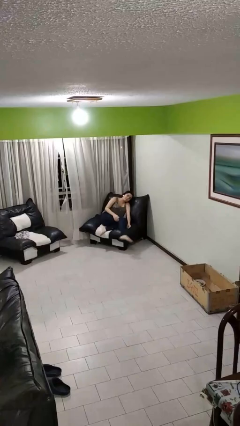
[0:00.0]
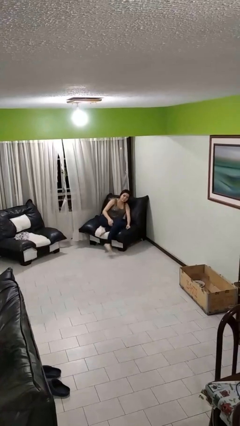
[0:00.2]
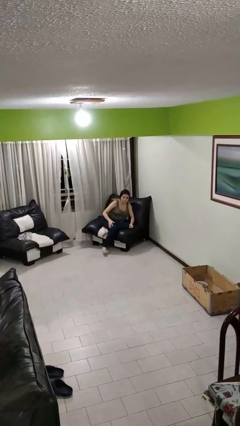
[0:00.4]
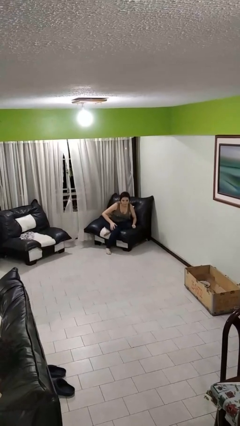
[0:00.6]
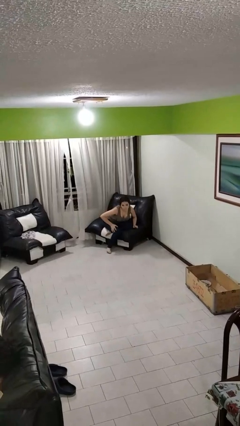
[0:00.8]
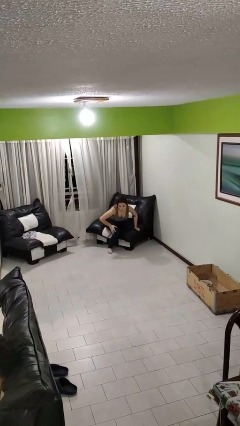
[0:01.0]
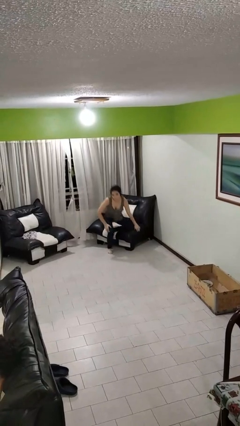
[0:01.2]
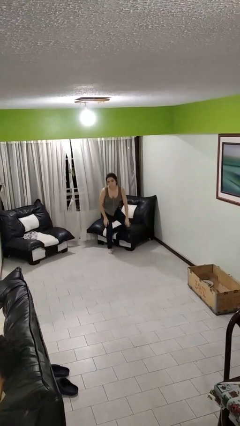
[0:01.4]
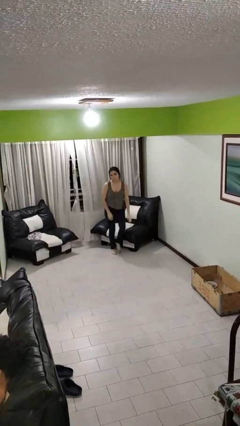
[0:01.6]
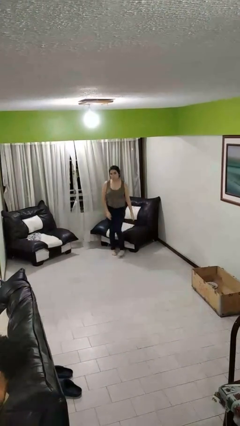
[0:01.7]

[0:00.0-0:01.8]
person stands up

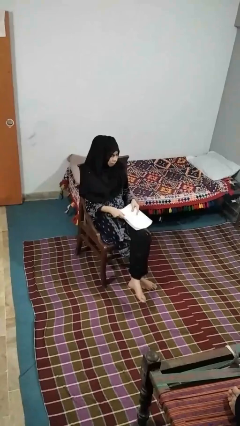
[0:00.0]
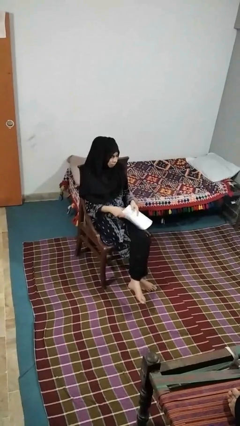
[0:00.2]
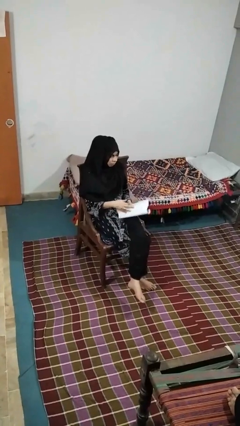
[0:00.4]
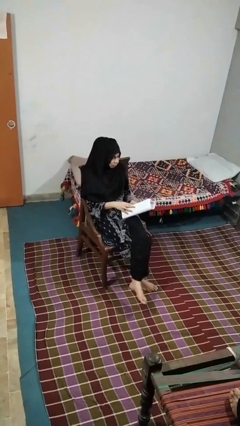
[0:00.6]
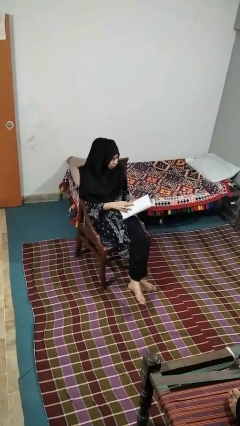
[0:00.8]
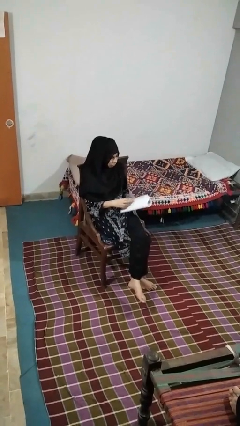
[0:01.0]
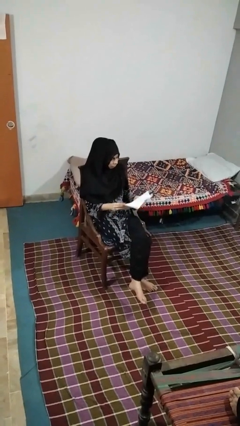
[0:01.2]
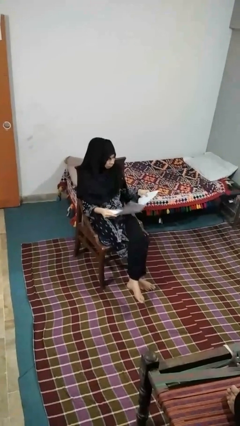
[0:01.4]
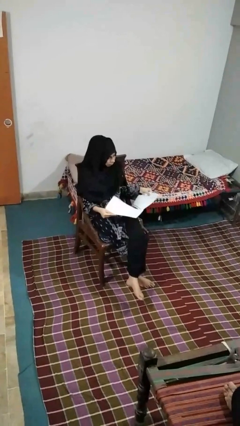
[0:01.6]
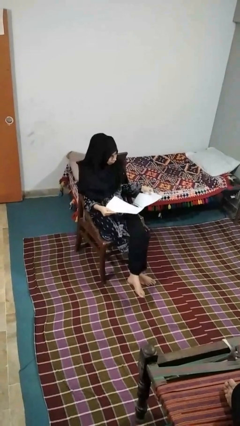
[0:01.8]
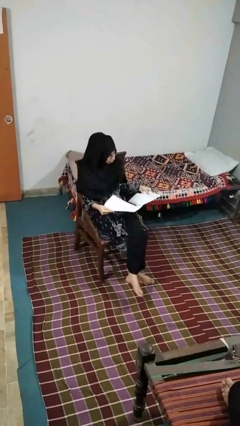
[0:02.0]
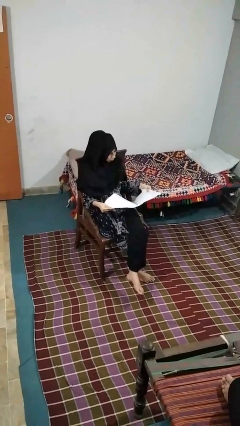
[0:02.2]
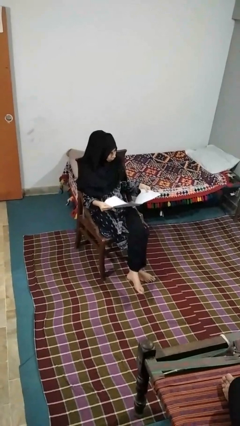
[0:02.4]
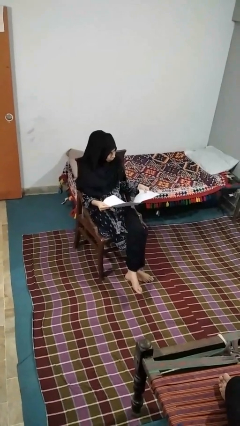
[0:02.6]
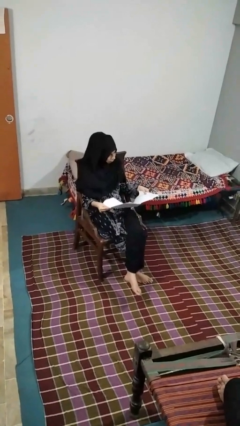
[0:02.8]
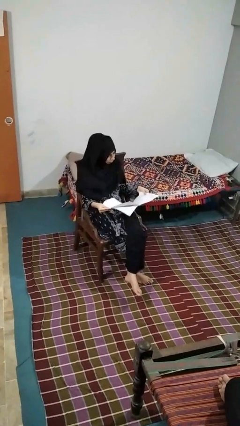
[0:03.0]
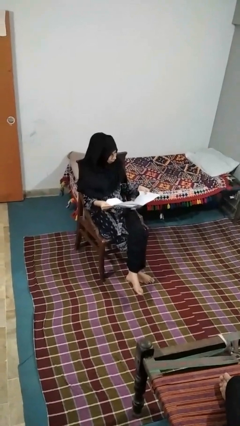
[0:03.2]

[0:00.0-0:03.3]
person reads newspaper

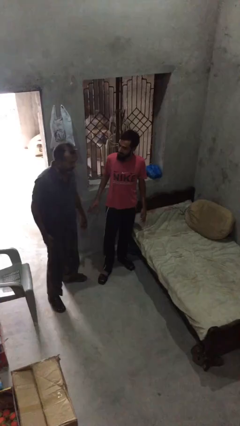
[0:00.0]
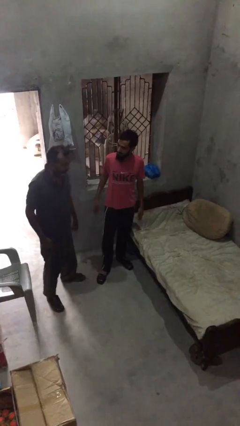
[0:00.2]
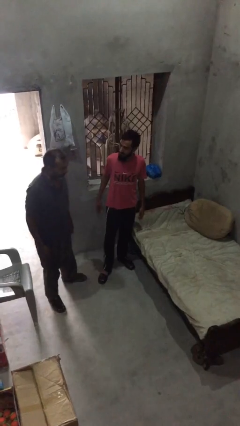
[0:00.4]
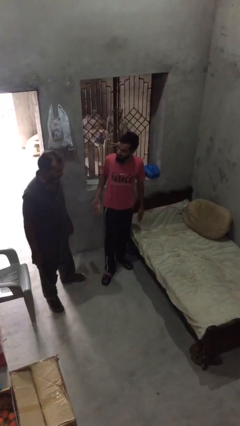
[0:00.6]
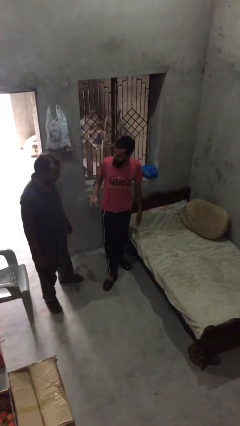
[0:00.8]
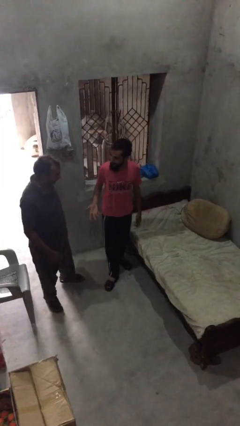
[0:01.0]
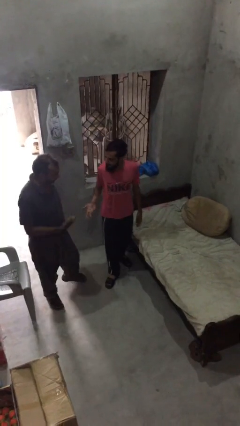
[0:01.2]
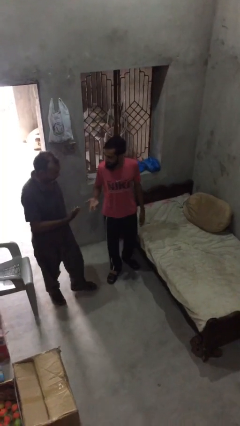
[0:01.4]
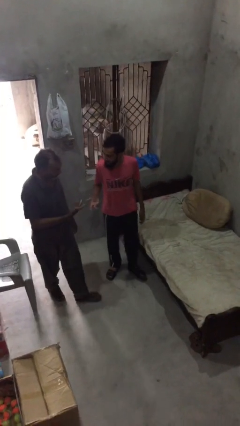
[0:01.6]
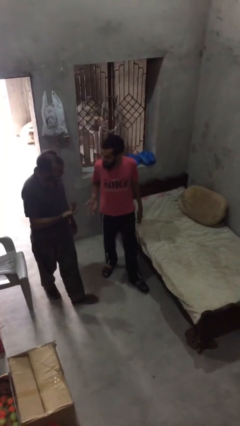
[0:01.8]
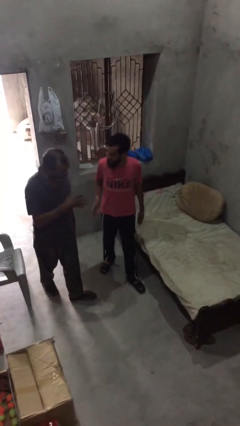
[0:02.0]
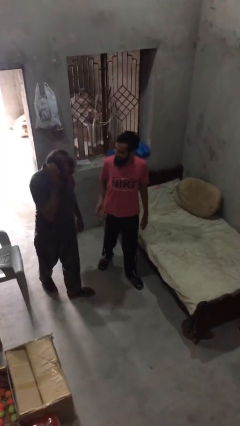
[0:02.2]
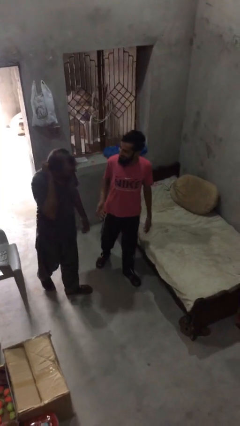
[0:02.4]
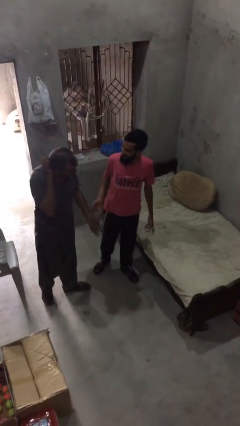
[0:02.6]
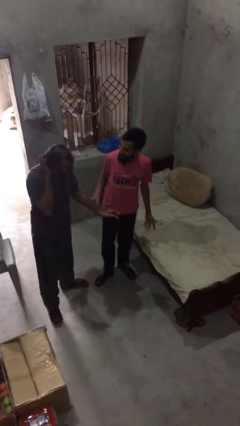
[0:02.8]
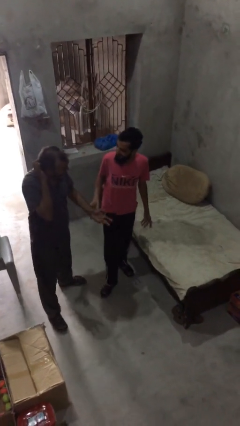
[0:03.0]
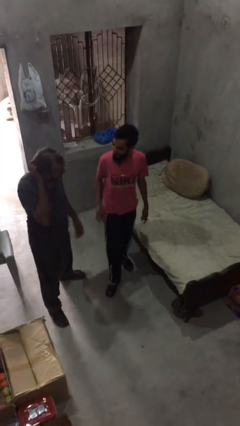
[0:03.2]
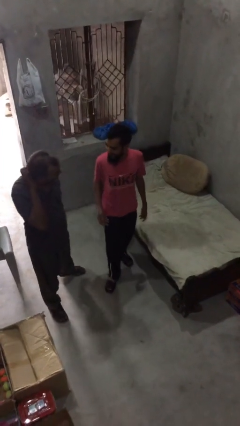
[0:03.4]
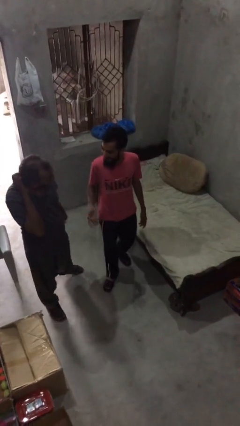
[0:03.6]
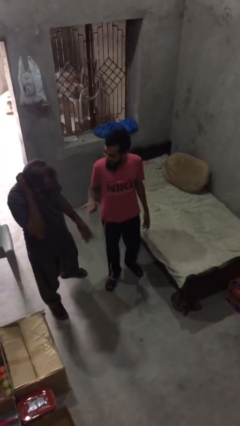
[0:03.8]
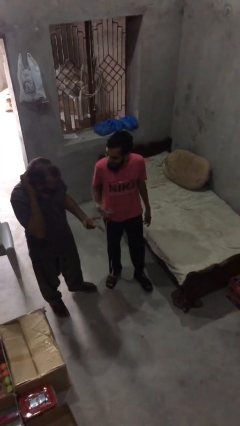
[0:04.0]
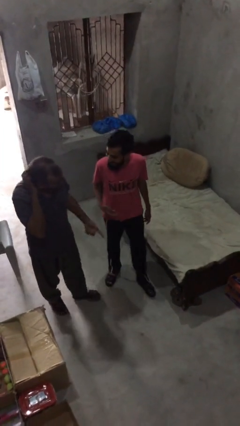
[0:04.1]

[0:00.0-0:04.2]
person talks to person

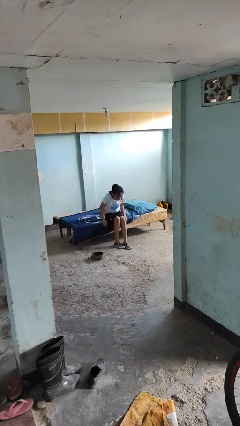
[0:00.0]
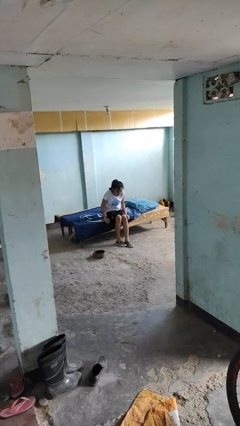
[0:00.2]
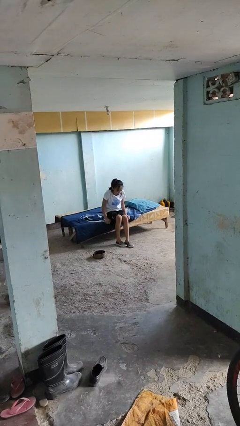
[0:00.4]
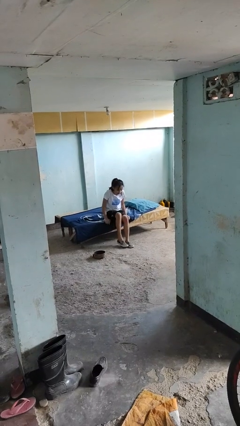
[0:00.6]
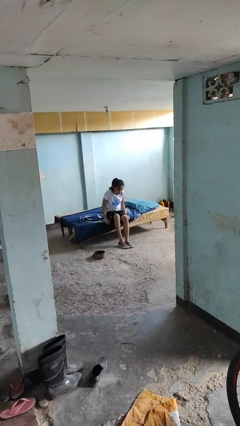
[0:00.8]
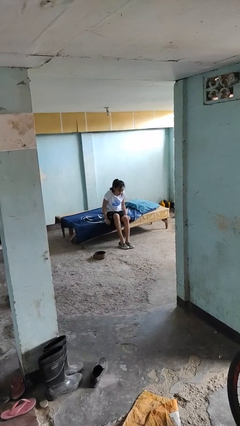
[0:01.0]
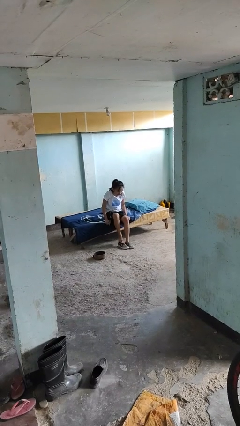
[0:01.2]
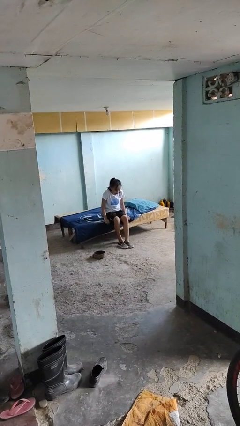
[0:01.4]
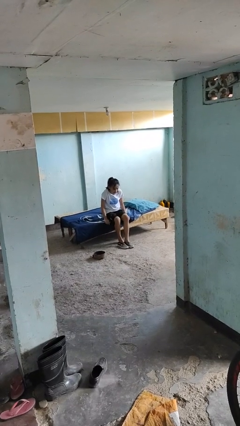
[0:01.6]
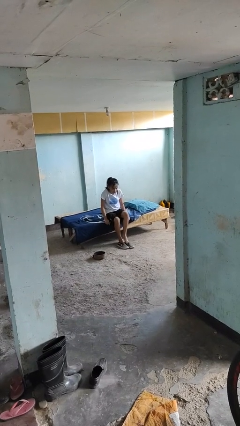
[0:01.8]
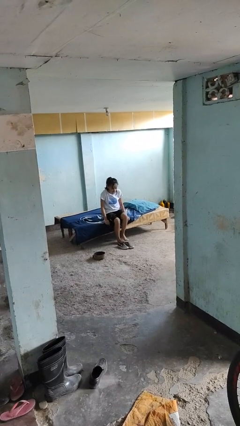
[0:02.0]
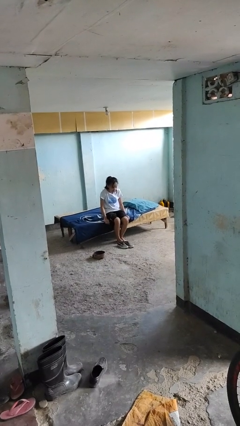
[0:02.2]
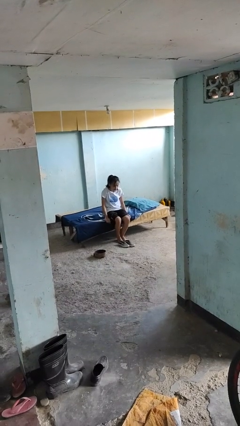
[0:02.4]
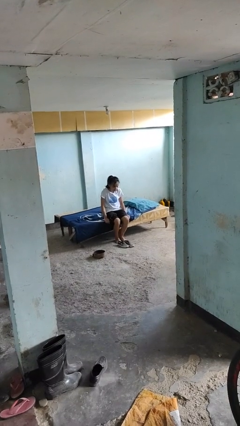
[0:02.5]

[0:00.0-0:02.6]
person takes off shoes

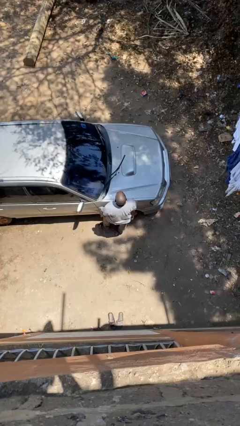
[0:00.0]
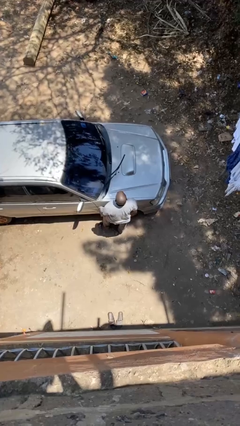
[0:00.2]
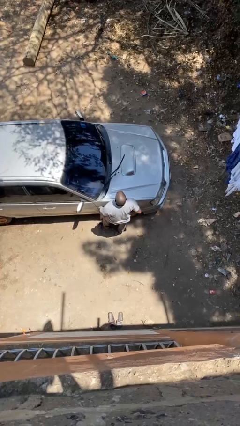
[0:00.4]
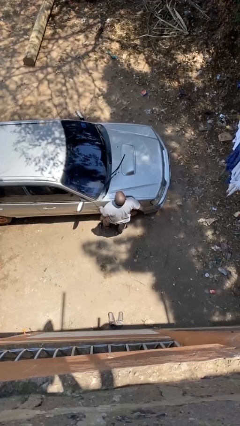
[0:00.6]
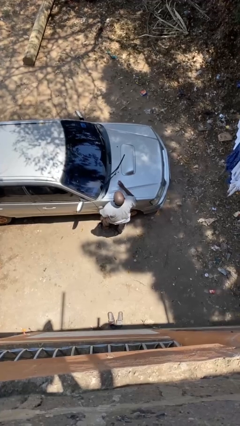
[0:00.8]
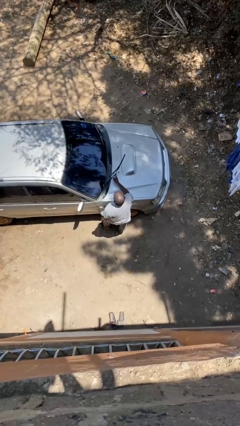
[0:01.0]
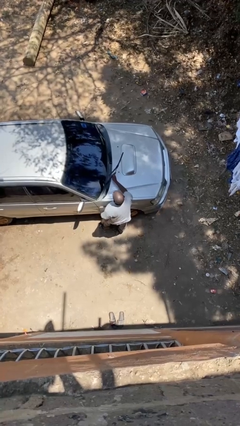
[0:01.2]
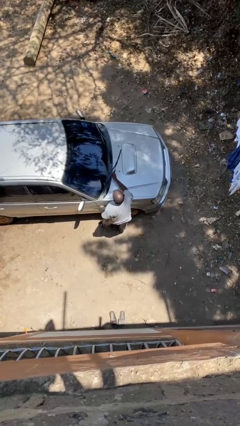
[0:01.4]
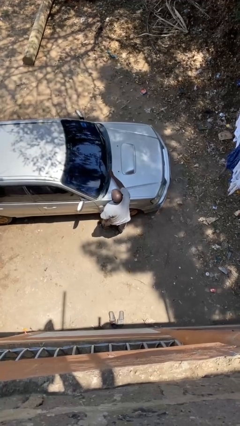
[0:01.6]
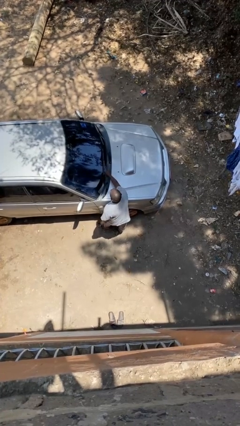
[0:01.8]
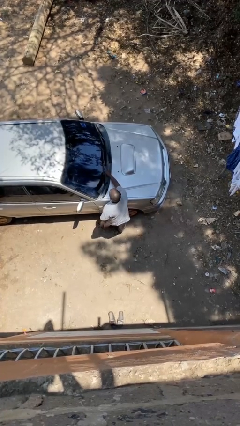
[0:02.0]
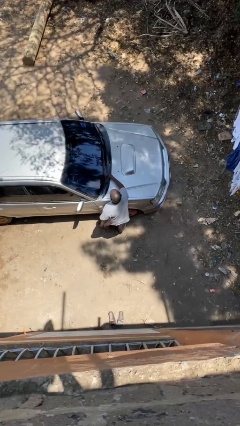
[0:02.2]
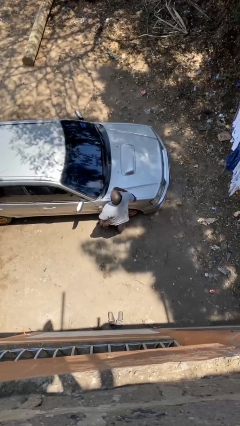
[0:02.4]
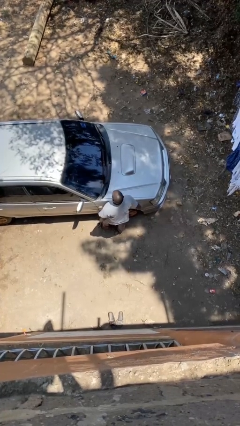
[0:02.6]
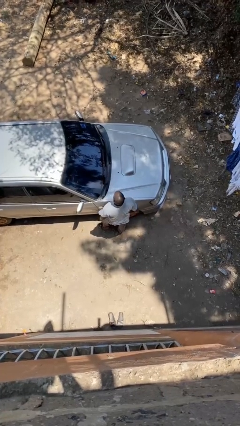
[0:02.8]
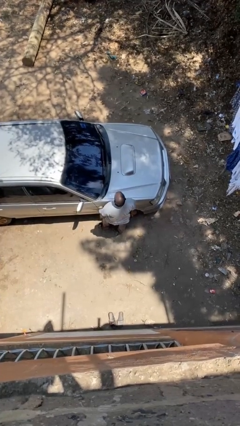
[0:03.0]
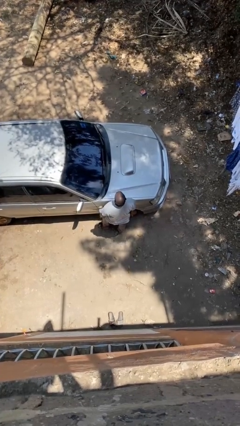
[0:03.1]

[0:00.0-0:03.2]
person flips down car wipers

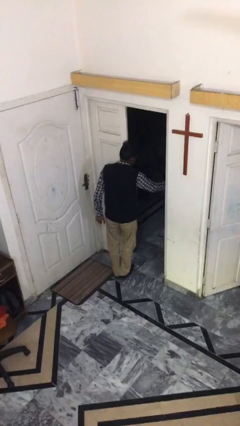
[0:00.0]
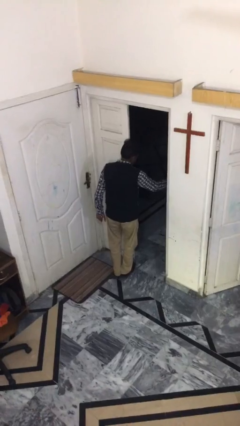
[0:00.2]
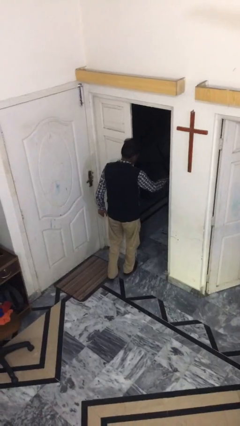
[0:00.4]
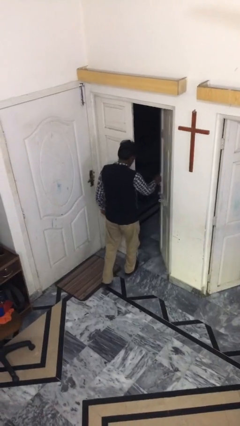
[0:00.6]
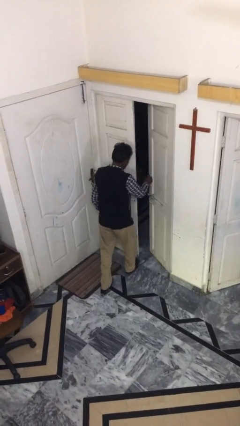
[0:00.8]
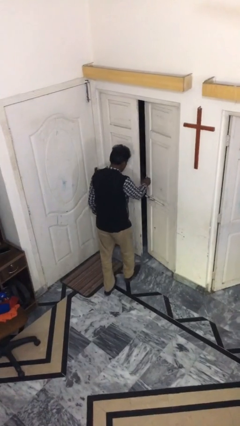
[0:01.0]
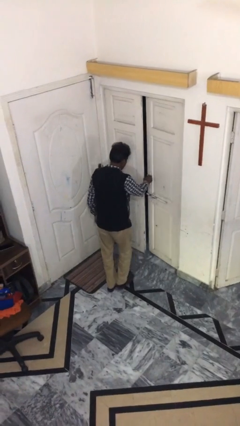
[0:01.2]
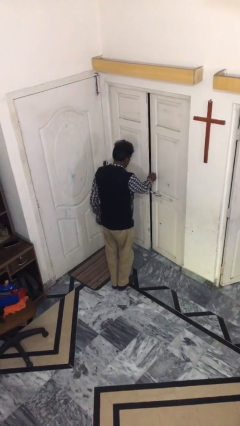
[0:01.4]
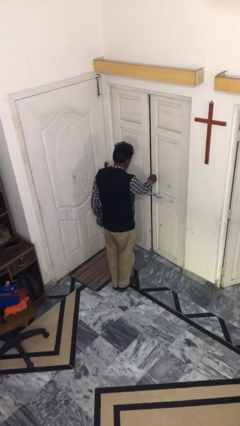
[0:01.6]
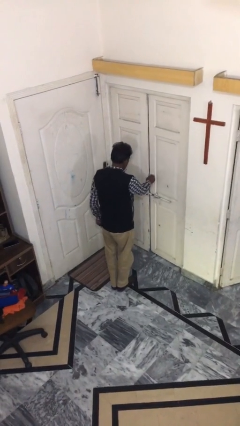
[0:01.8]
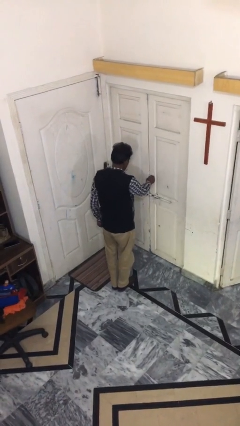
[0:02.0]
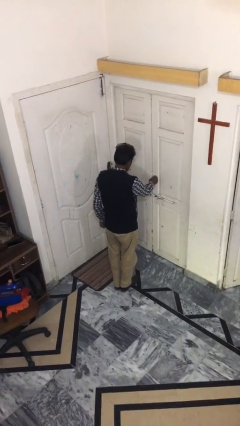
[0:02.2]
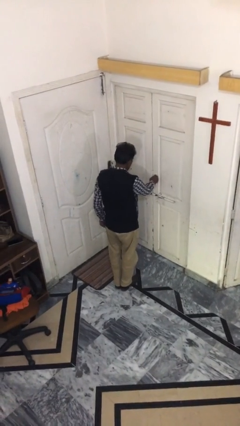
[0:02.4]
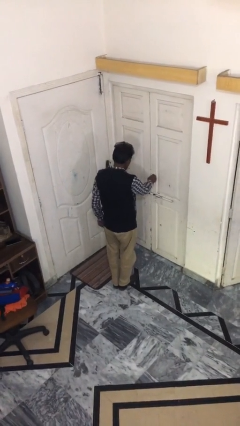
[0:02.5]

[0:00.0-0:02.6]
person closes facility door
